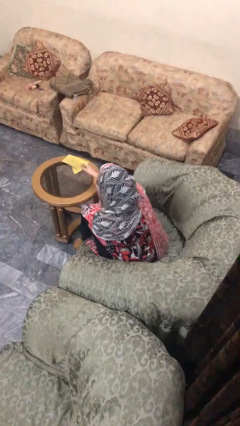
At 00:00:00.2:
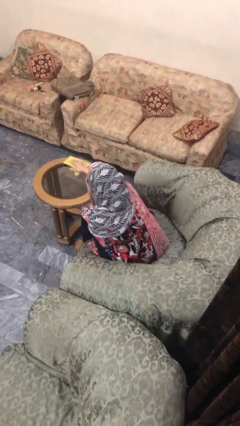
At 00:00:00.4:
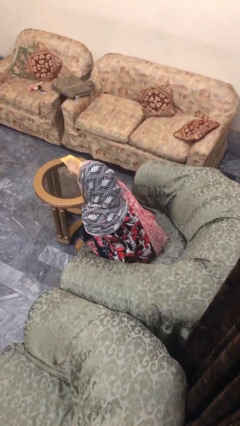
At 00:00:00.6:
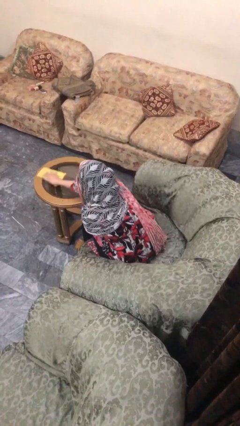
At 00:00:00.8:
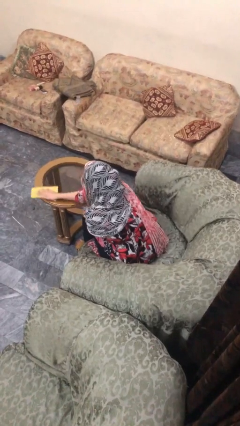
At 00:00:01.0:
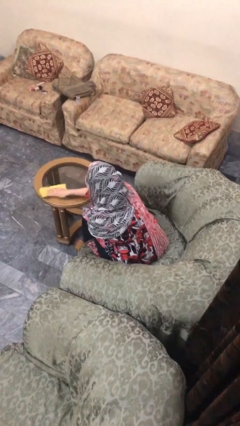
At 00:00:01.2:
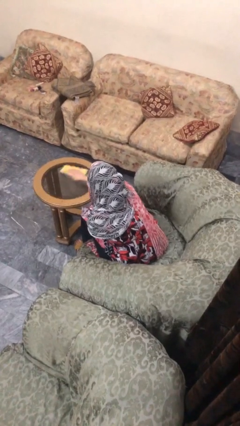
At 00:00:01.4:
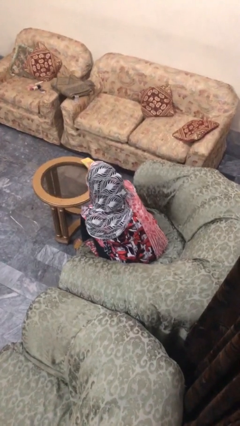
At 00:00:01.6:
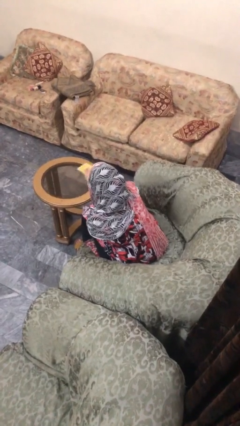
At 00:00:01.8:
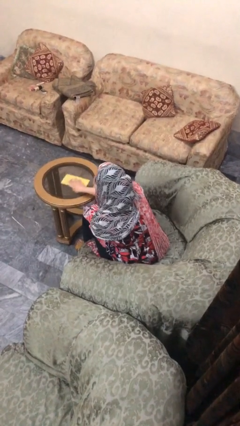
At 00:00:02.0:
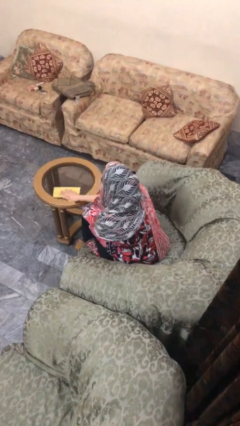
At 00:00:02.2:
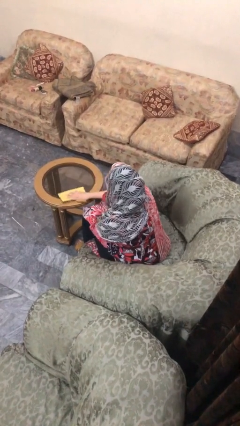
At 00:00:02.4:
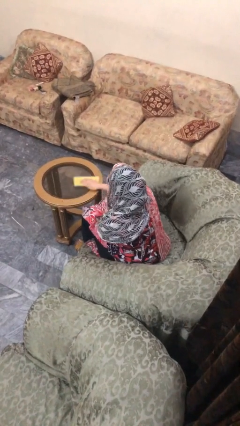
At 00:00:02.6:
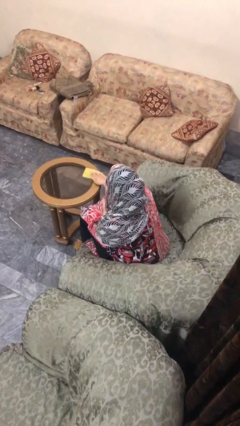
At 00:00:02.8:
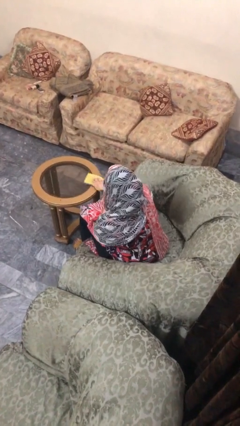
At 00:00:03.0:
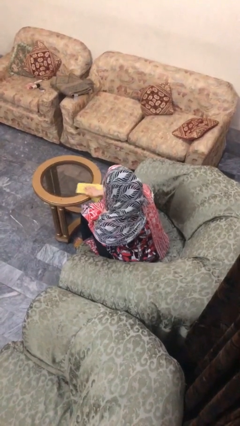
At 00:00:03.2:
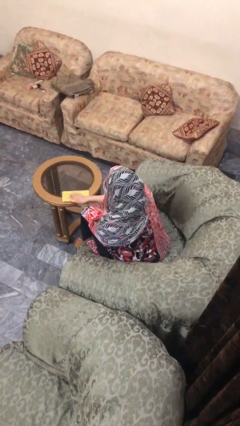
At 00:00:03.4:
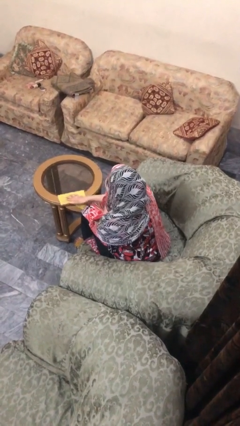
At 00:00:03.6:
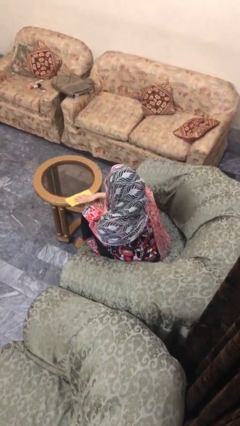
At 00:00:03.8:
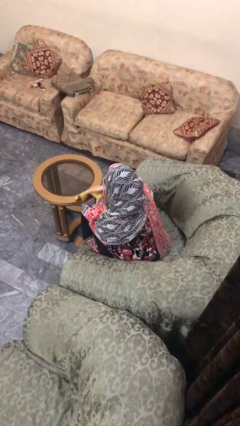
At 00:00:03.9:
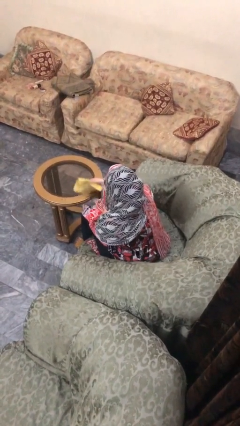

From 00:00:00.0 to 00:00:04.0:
person cleans table with rag

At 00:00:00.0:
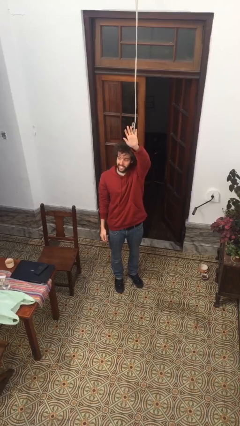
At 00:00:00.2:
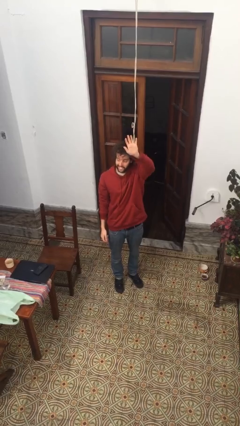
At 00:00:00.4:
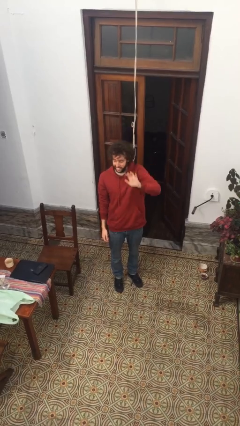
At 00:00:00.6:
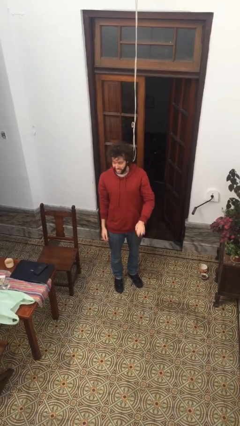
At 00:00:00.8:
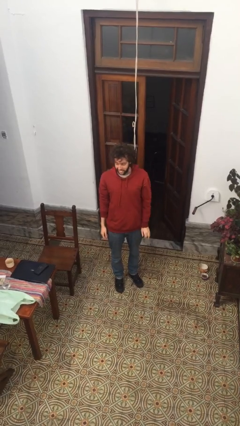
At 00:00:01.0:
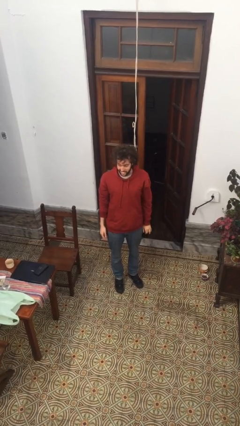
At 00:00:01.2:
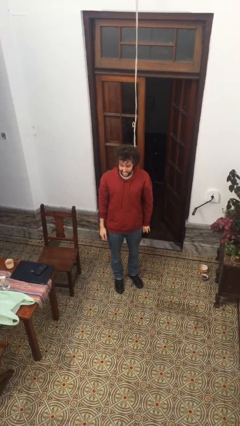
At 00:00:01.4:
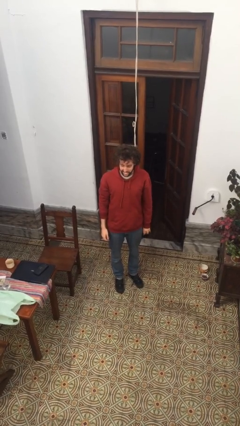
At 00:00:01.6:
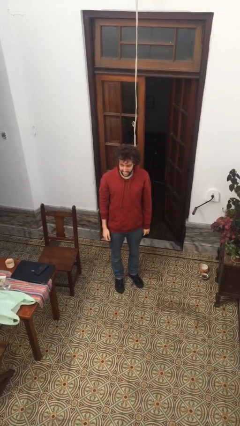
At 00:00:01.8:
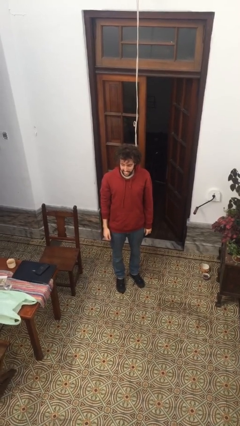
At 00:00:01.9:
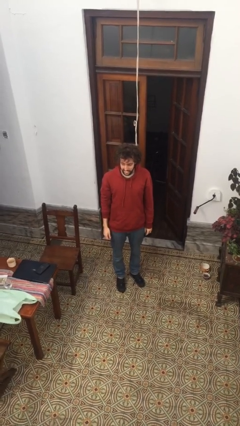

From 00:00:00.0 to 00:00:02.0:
person gestures lower hand

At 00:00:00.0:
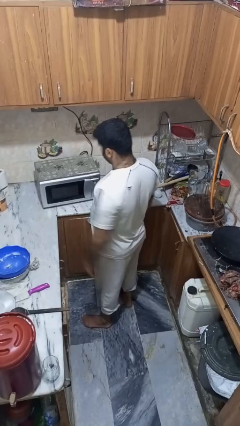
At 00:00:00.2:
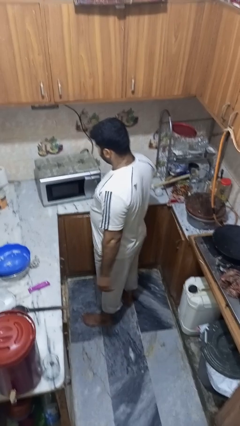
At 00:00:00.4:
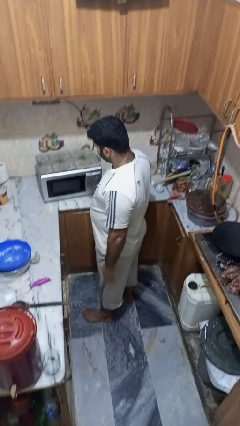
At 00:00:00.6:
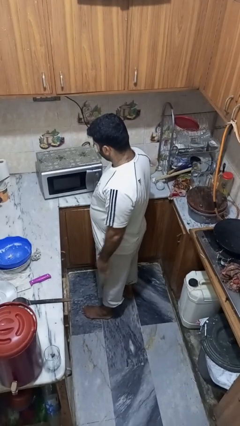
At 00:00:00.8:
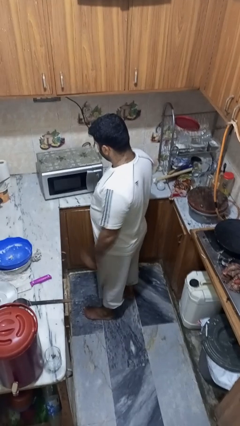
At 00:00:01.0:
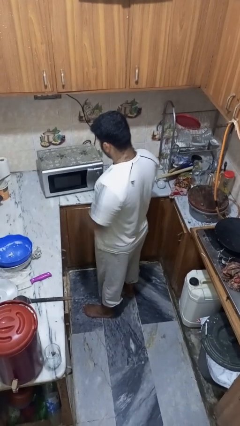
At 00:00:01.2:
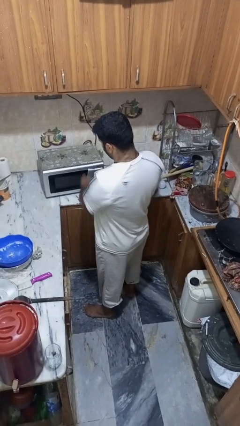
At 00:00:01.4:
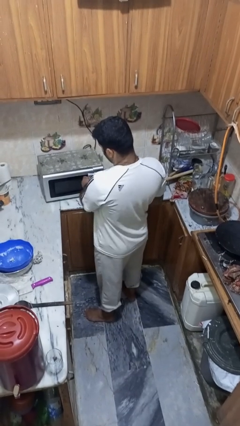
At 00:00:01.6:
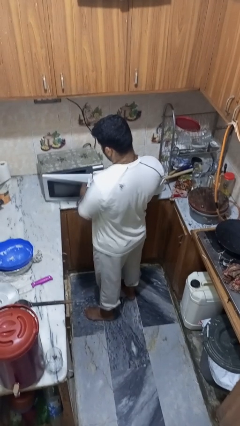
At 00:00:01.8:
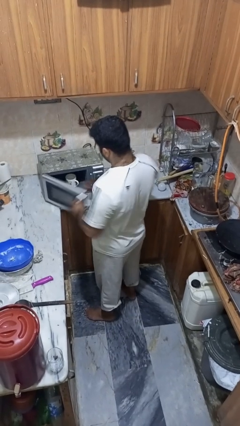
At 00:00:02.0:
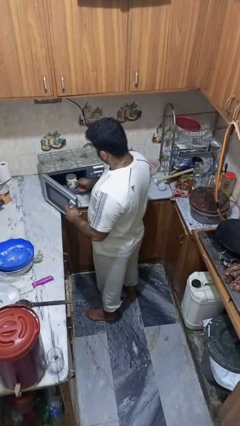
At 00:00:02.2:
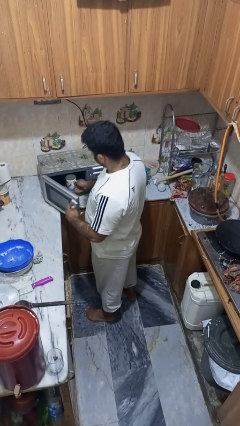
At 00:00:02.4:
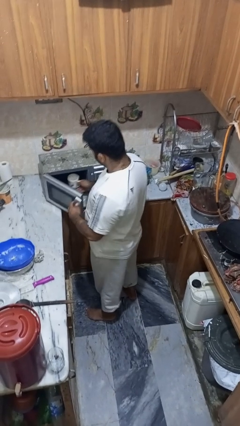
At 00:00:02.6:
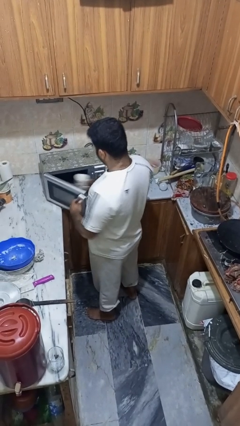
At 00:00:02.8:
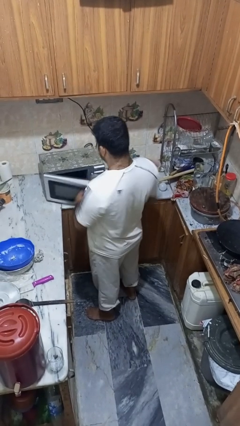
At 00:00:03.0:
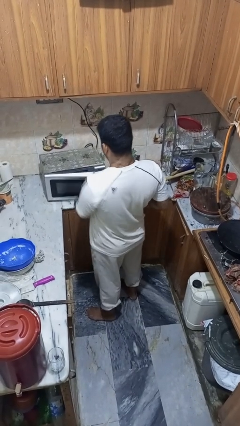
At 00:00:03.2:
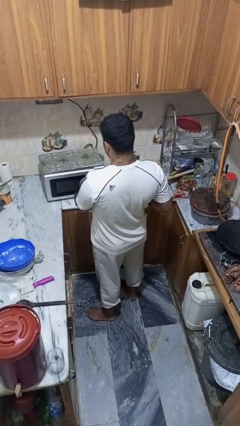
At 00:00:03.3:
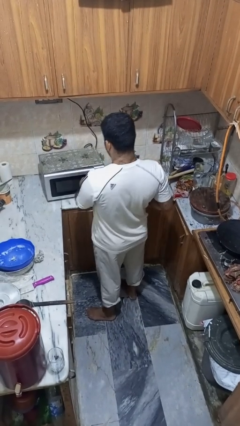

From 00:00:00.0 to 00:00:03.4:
person takes object from microwave

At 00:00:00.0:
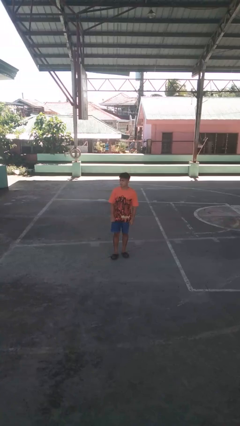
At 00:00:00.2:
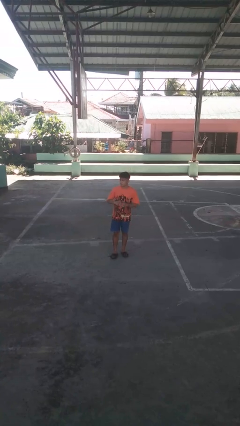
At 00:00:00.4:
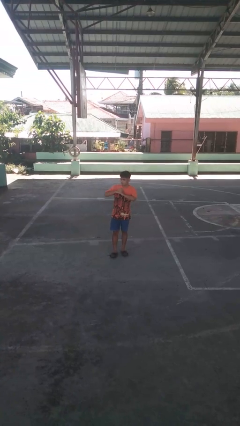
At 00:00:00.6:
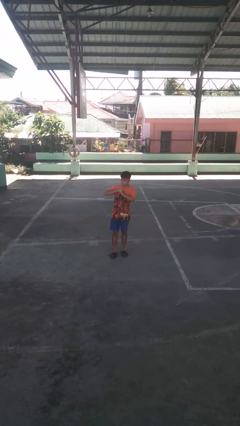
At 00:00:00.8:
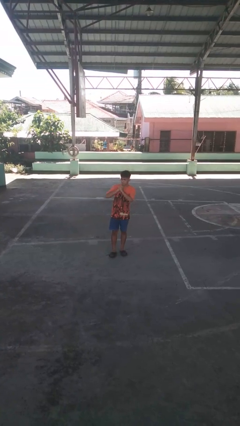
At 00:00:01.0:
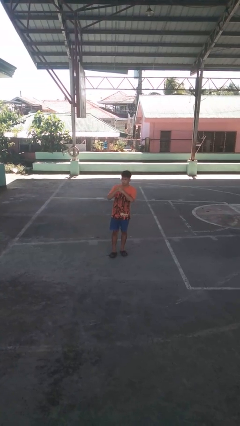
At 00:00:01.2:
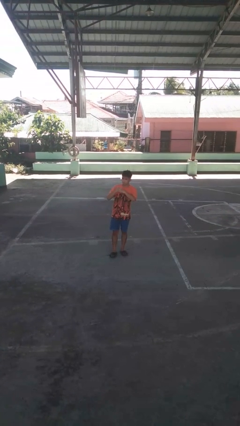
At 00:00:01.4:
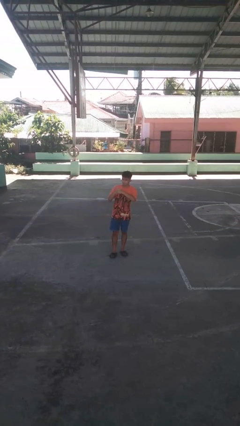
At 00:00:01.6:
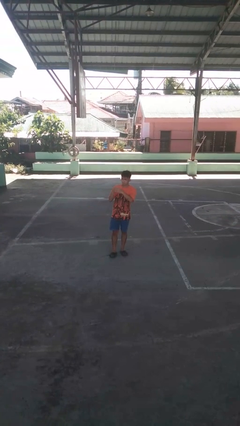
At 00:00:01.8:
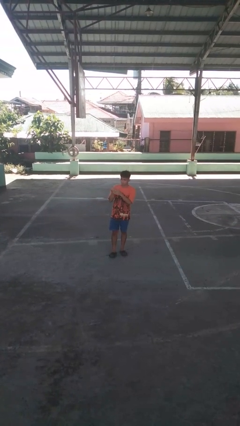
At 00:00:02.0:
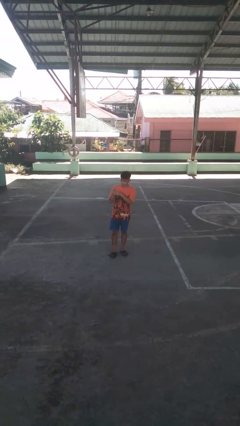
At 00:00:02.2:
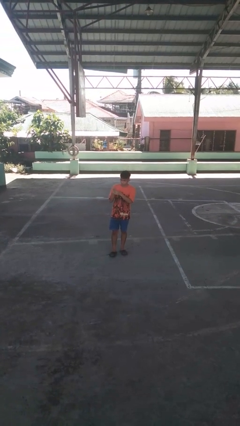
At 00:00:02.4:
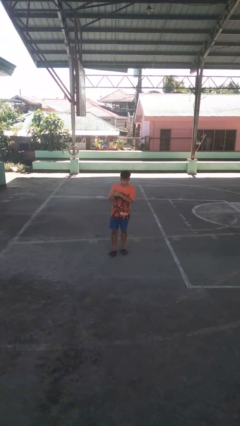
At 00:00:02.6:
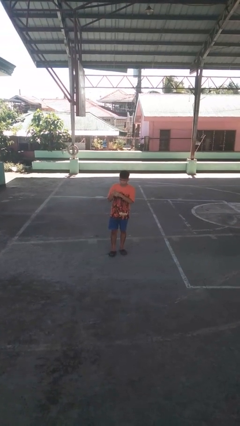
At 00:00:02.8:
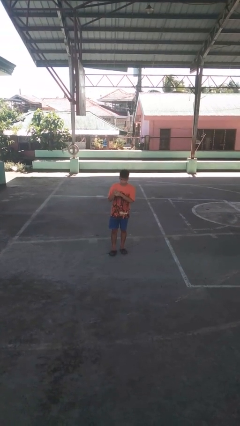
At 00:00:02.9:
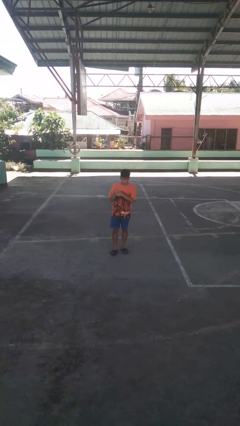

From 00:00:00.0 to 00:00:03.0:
person cracks knuckles

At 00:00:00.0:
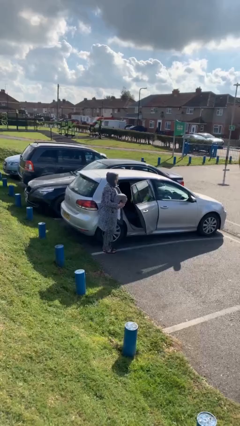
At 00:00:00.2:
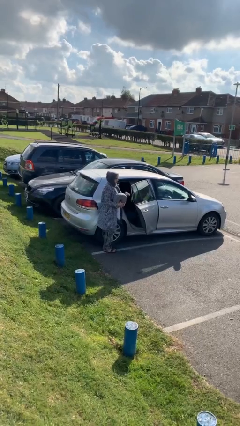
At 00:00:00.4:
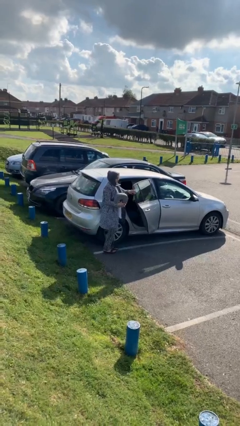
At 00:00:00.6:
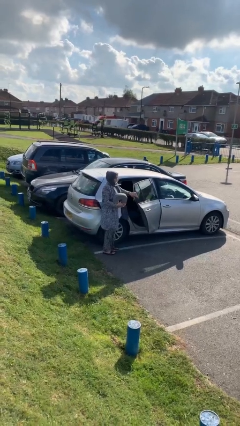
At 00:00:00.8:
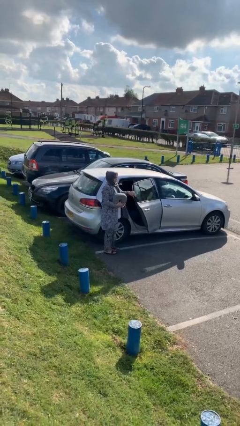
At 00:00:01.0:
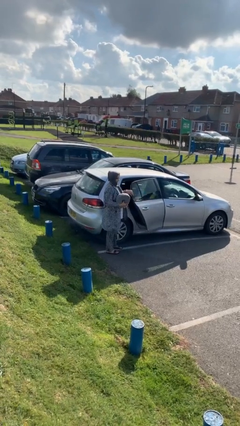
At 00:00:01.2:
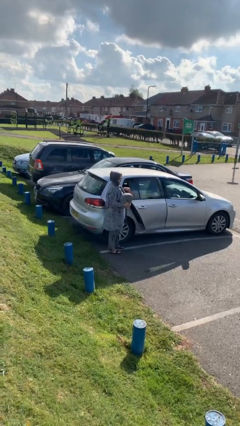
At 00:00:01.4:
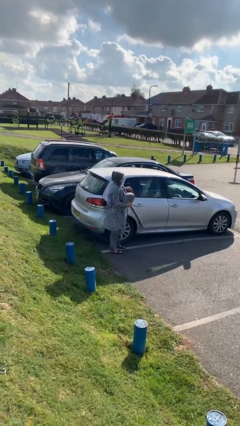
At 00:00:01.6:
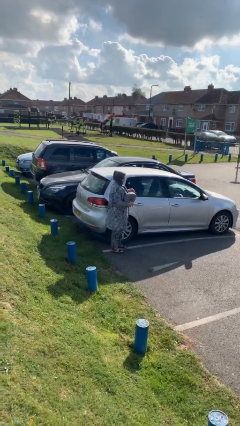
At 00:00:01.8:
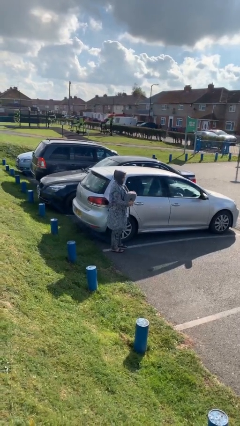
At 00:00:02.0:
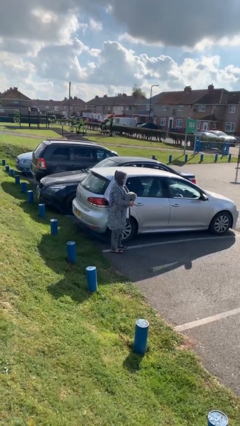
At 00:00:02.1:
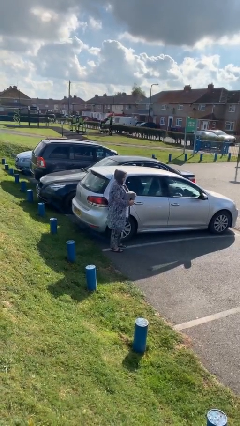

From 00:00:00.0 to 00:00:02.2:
person closes car door

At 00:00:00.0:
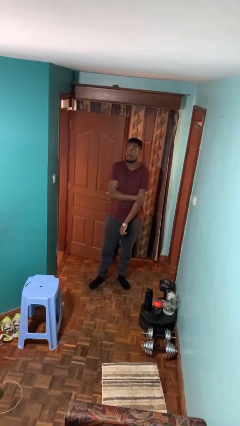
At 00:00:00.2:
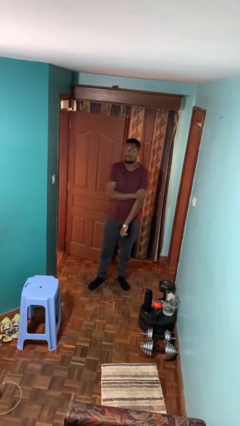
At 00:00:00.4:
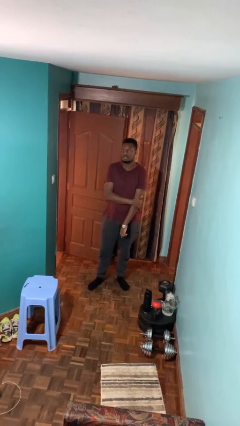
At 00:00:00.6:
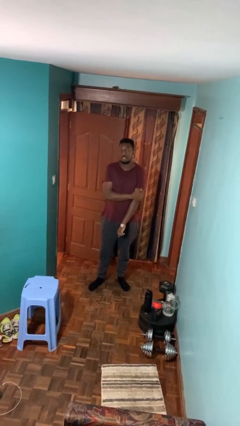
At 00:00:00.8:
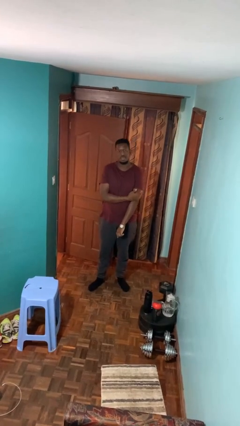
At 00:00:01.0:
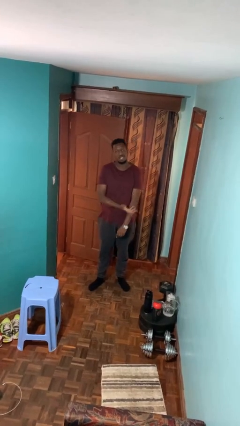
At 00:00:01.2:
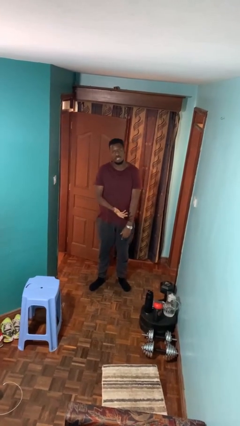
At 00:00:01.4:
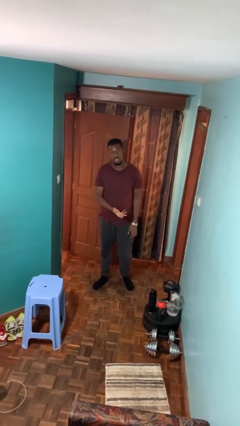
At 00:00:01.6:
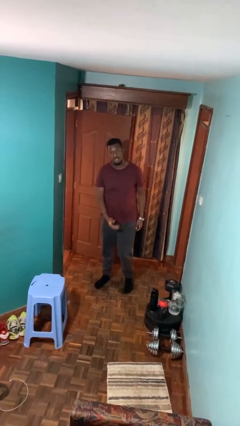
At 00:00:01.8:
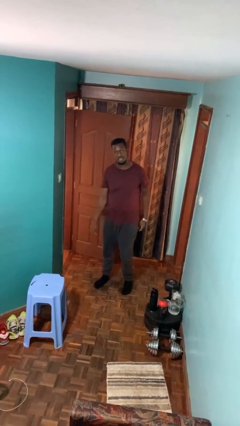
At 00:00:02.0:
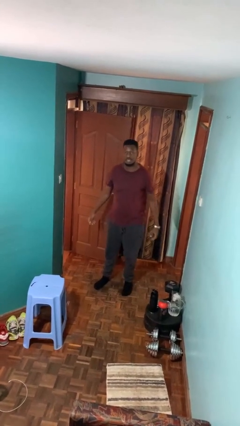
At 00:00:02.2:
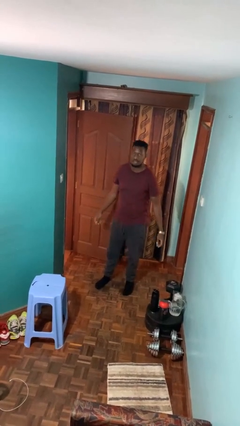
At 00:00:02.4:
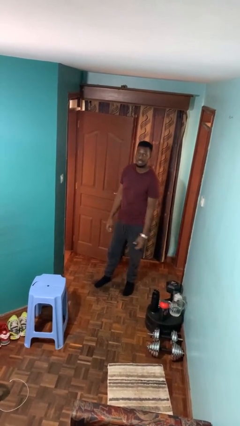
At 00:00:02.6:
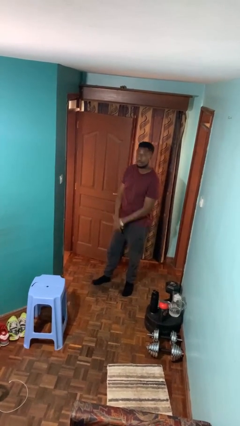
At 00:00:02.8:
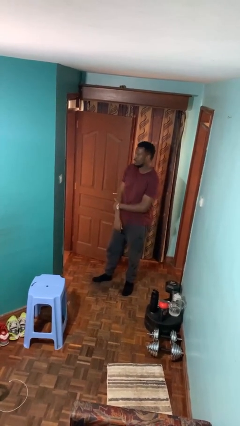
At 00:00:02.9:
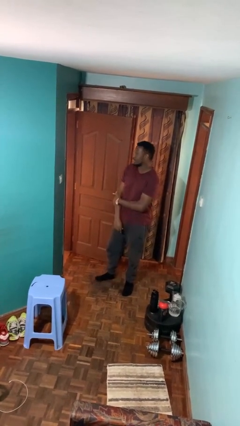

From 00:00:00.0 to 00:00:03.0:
person takes phone from pocket
